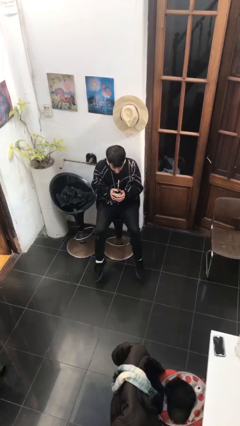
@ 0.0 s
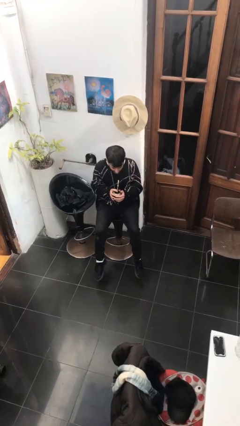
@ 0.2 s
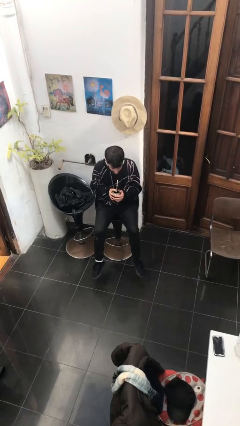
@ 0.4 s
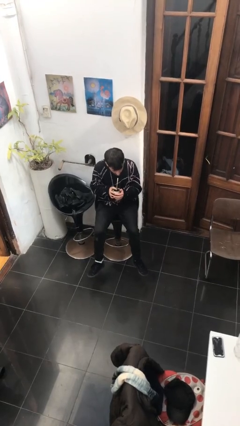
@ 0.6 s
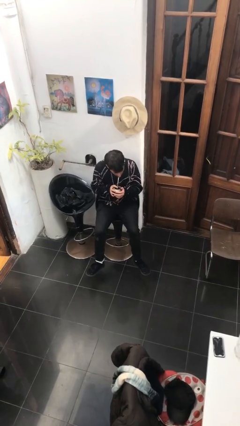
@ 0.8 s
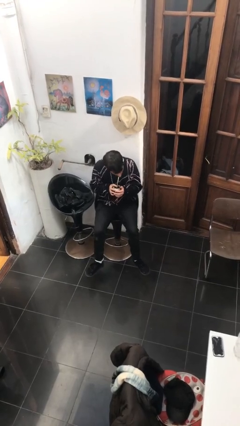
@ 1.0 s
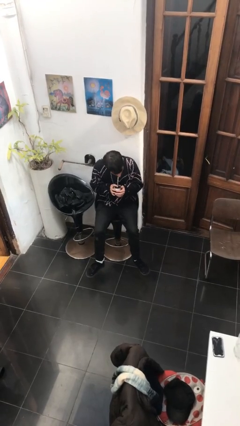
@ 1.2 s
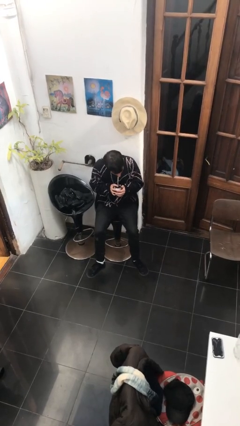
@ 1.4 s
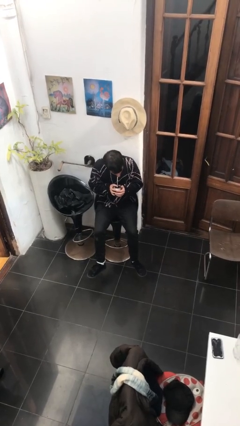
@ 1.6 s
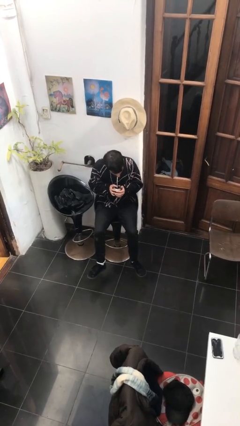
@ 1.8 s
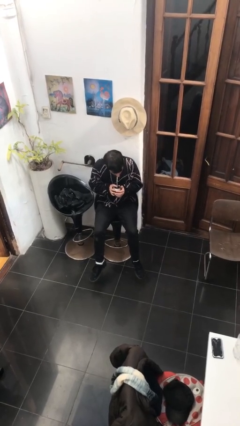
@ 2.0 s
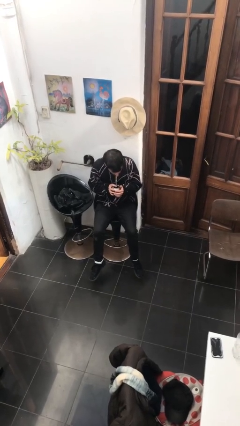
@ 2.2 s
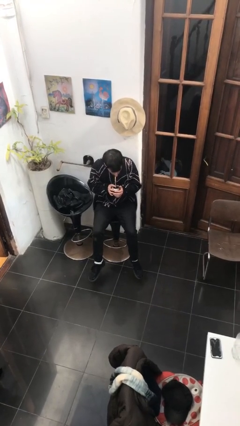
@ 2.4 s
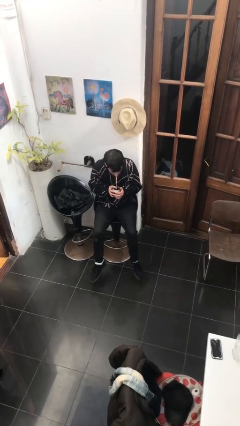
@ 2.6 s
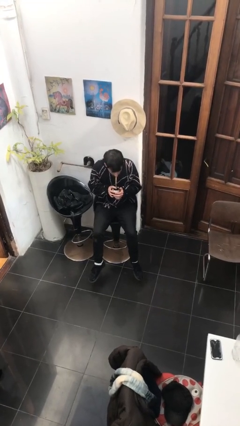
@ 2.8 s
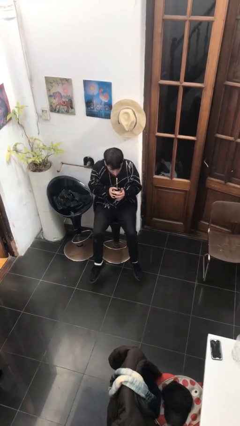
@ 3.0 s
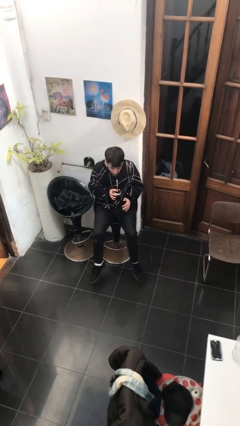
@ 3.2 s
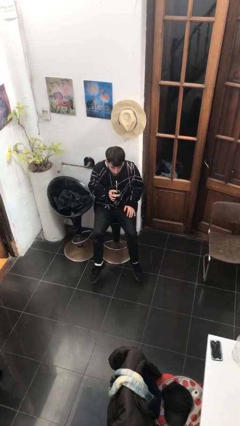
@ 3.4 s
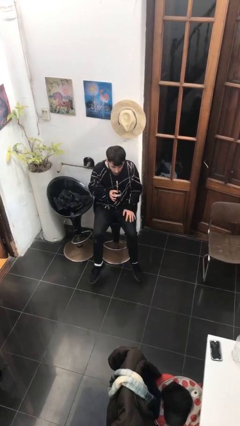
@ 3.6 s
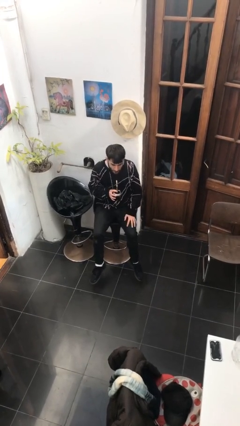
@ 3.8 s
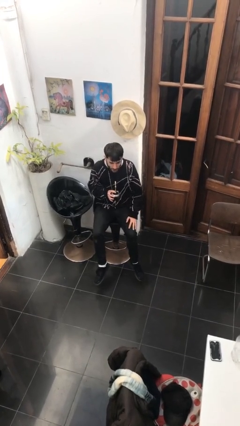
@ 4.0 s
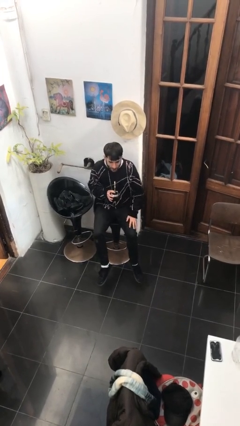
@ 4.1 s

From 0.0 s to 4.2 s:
person drinks from straw

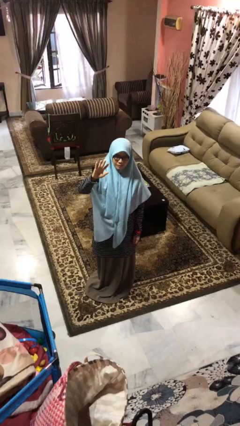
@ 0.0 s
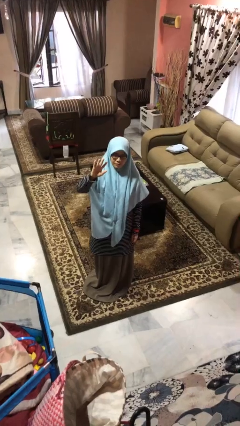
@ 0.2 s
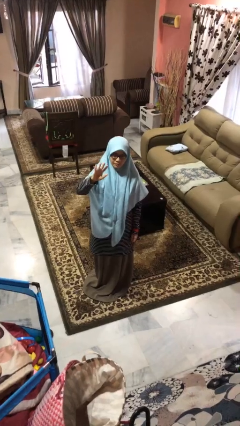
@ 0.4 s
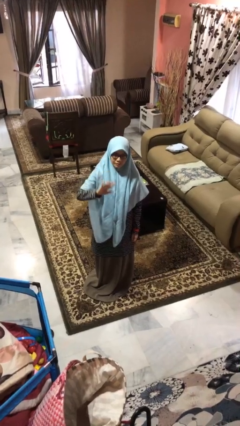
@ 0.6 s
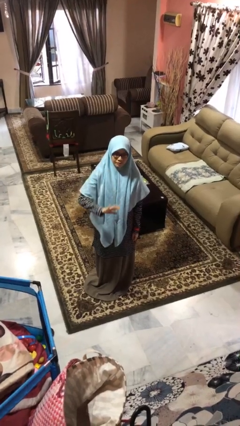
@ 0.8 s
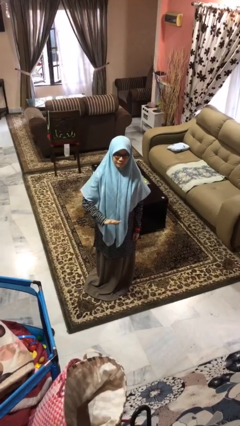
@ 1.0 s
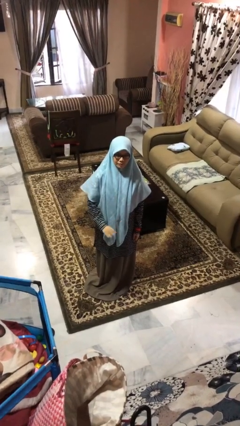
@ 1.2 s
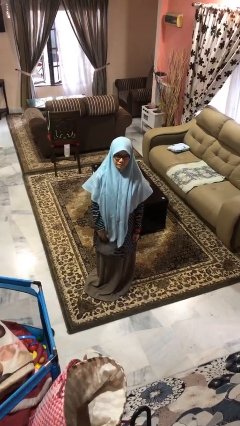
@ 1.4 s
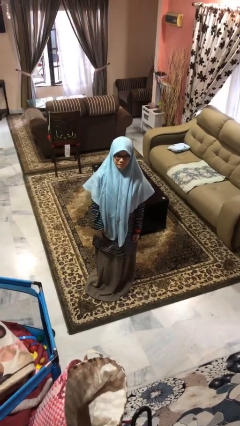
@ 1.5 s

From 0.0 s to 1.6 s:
person gestures swipe down

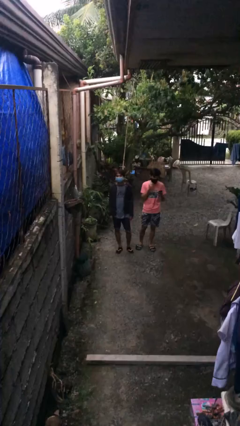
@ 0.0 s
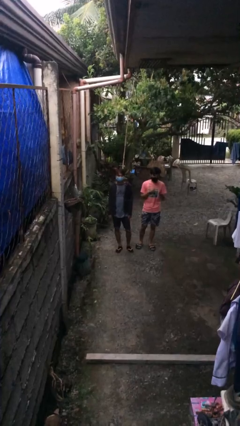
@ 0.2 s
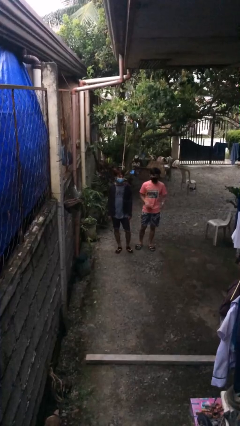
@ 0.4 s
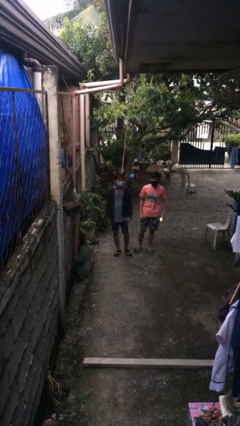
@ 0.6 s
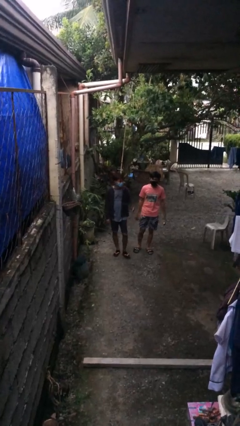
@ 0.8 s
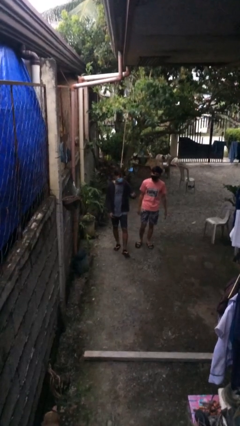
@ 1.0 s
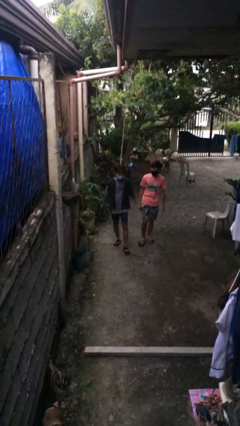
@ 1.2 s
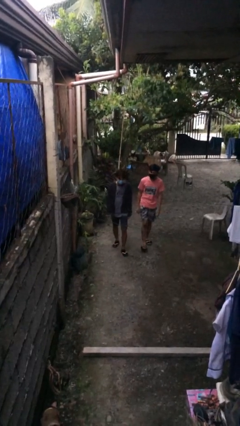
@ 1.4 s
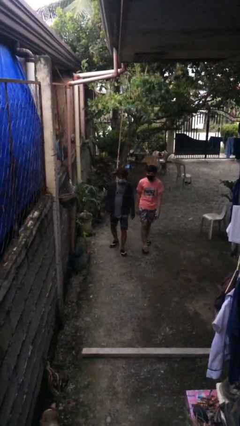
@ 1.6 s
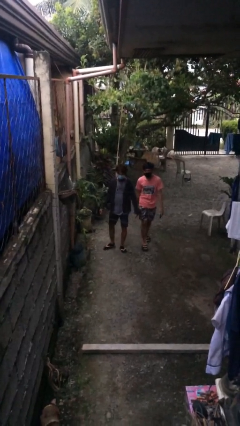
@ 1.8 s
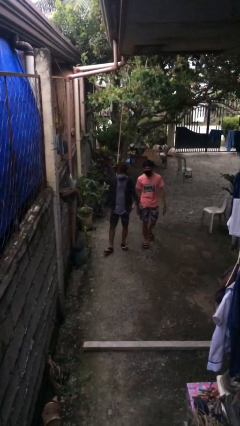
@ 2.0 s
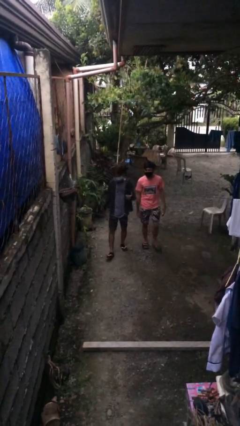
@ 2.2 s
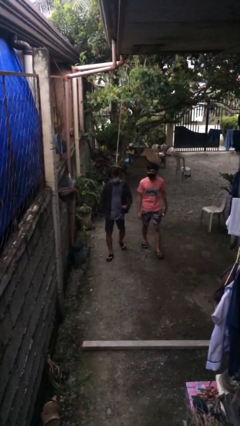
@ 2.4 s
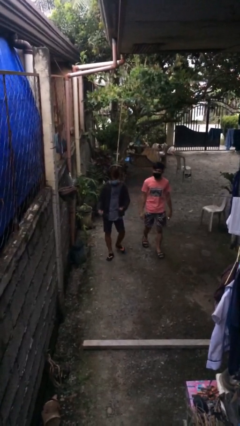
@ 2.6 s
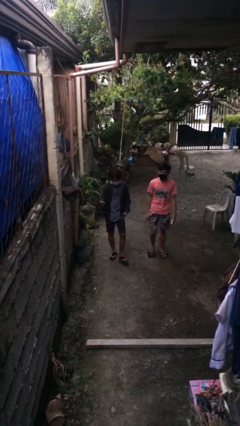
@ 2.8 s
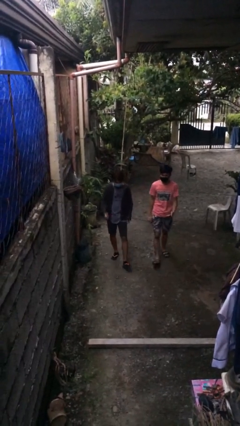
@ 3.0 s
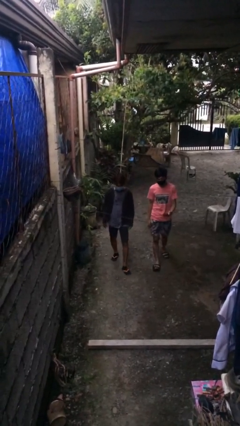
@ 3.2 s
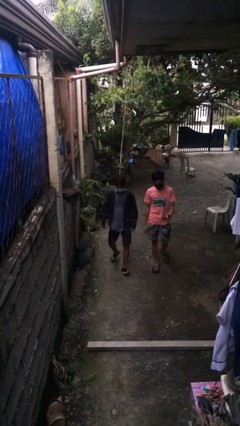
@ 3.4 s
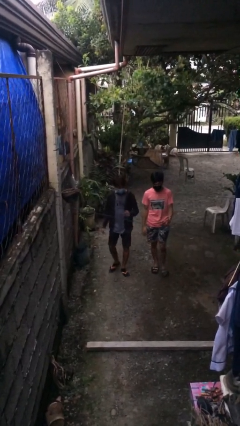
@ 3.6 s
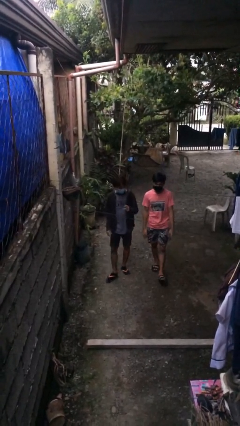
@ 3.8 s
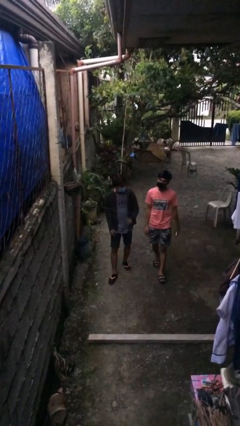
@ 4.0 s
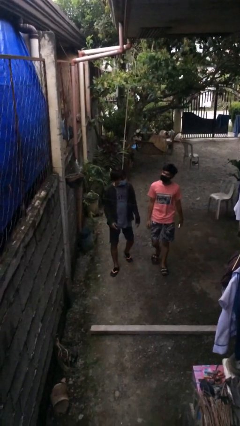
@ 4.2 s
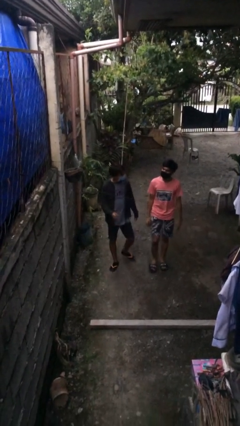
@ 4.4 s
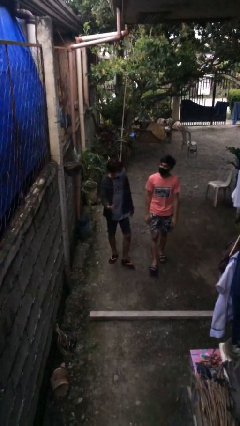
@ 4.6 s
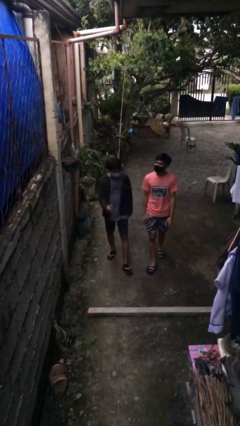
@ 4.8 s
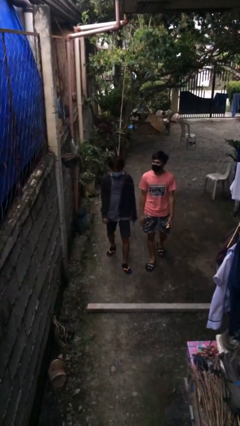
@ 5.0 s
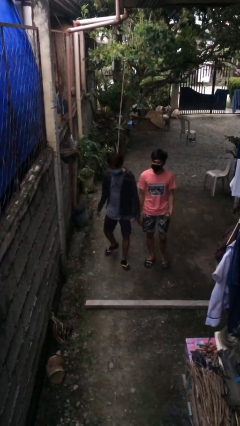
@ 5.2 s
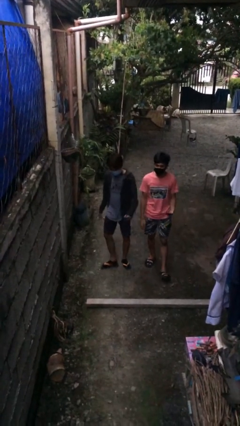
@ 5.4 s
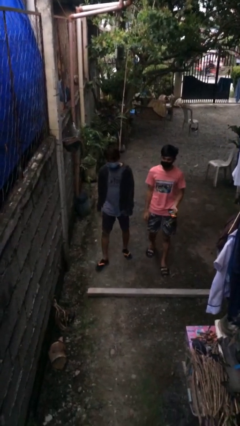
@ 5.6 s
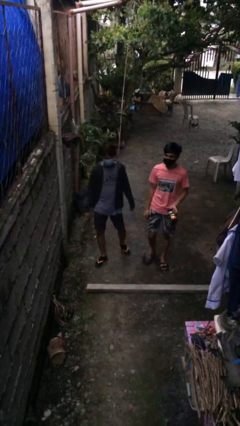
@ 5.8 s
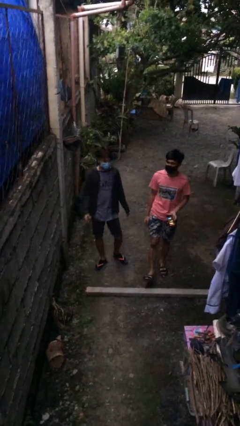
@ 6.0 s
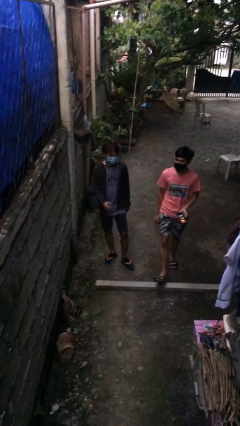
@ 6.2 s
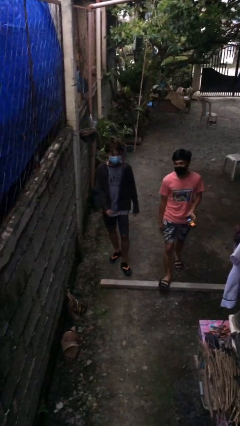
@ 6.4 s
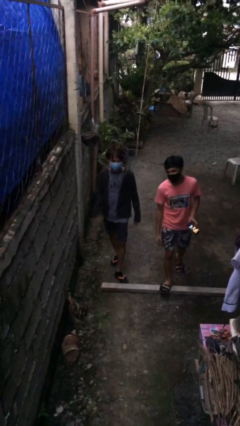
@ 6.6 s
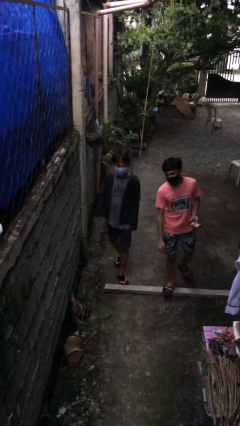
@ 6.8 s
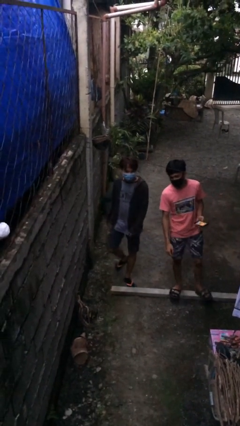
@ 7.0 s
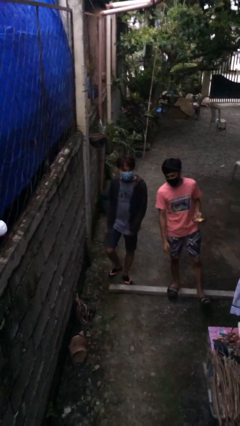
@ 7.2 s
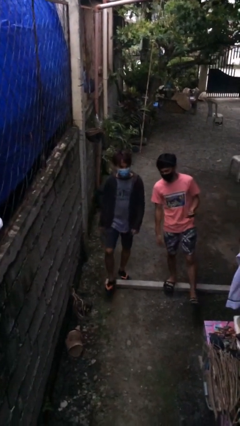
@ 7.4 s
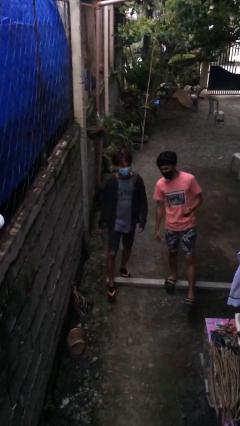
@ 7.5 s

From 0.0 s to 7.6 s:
person talks to person

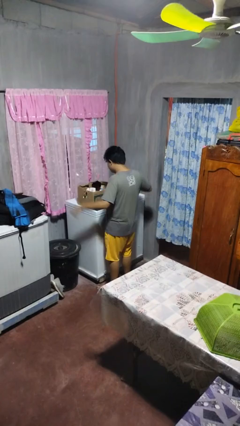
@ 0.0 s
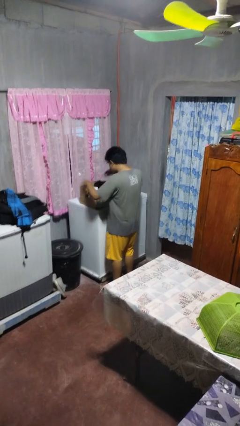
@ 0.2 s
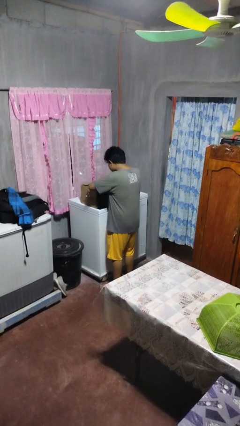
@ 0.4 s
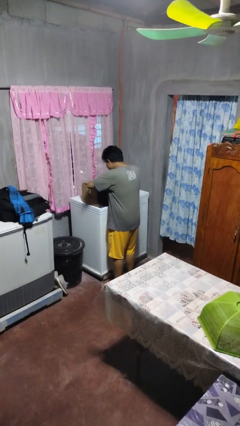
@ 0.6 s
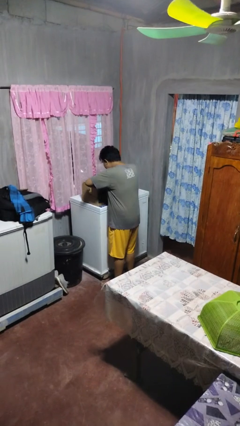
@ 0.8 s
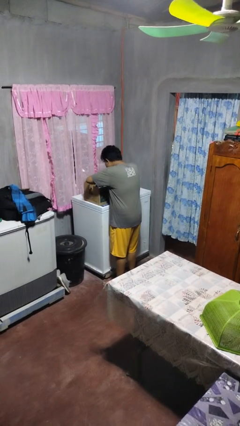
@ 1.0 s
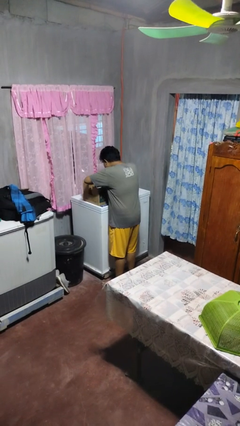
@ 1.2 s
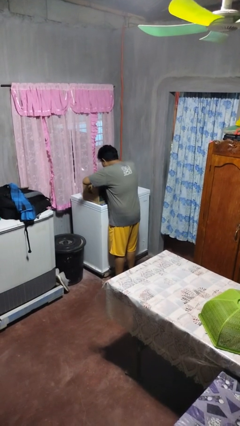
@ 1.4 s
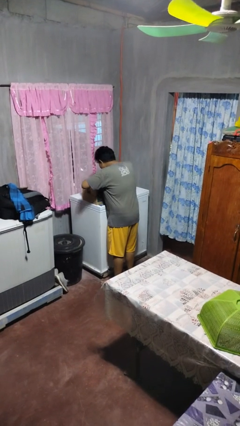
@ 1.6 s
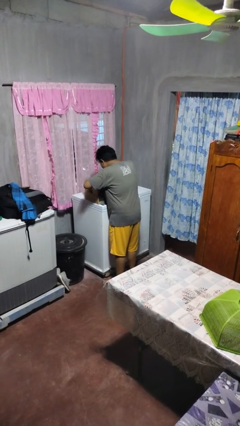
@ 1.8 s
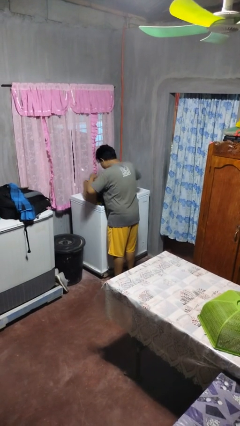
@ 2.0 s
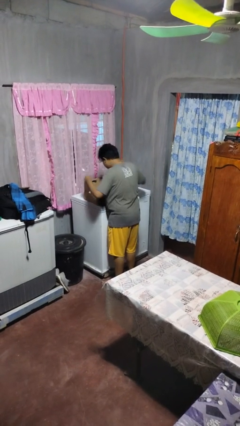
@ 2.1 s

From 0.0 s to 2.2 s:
person searches in box

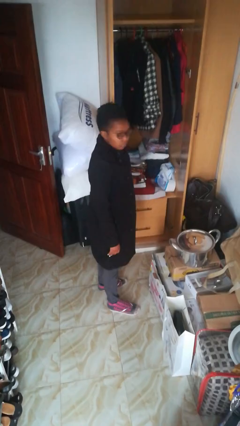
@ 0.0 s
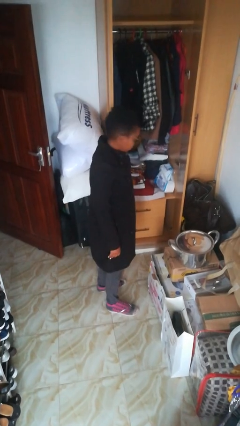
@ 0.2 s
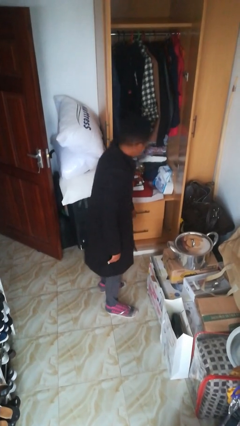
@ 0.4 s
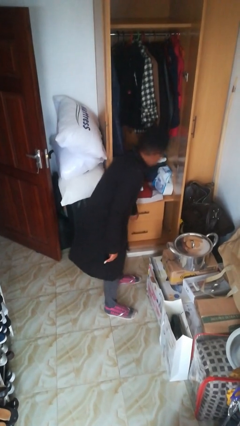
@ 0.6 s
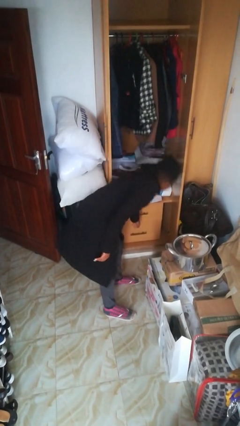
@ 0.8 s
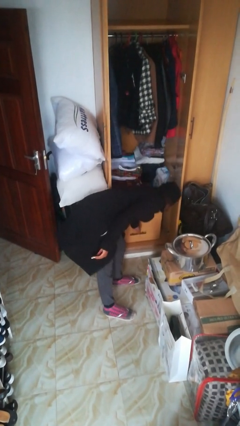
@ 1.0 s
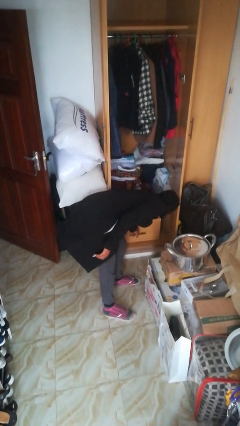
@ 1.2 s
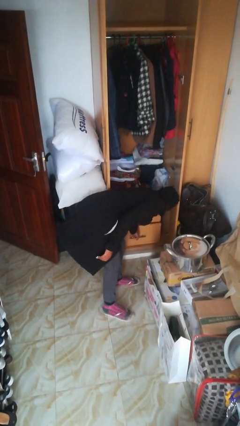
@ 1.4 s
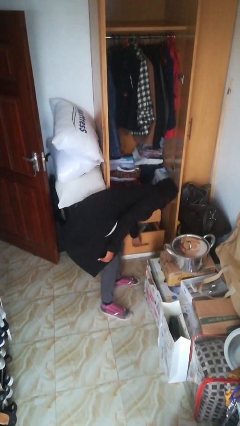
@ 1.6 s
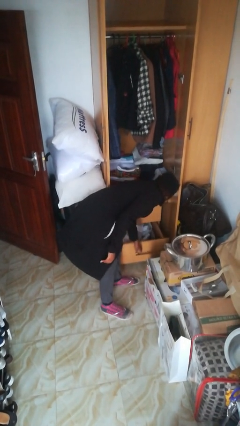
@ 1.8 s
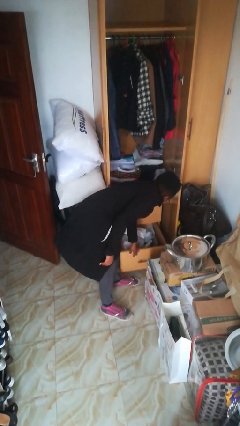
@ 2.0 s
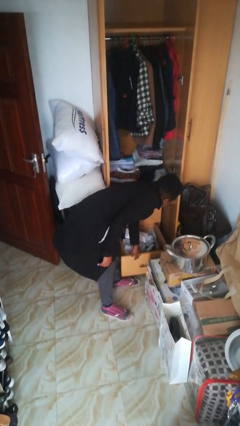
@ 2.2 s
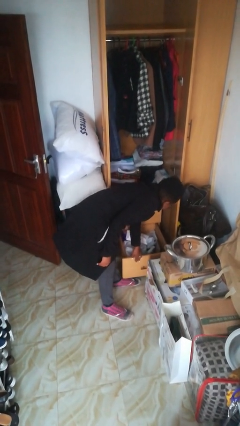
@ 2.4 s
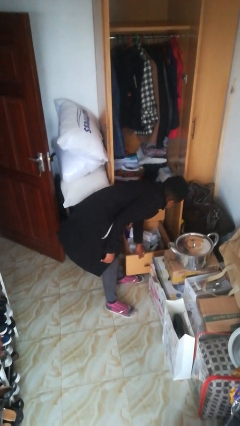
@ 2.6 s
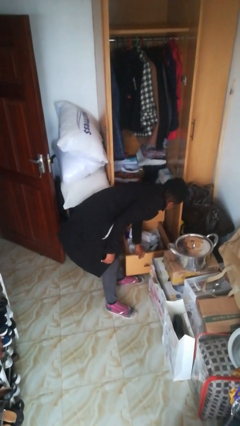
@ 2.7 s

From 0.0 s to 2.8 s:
person opens dresser drawer
